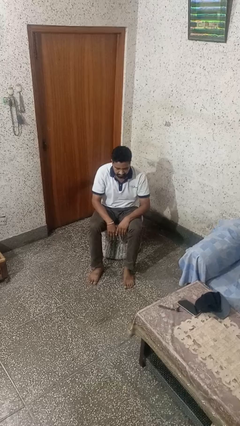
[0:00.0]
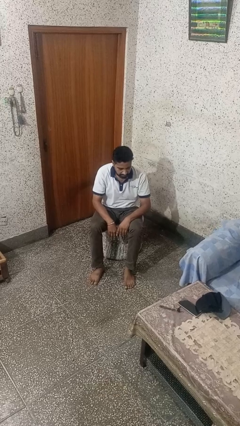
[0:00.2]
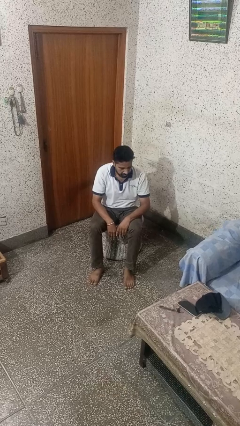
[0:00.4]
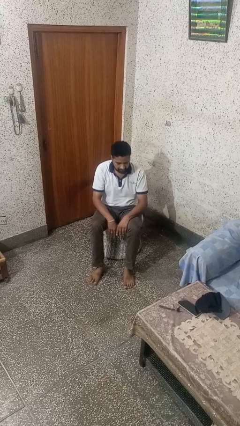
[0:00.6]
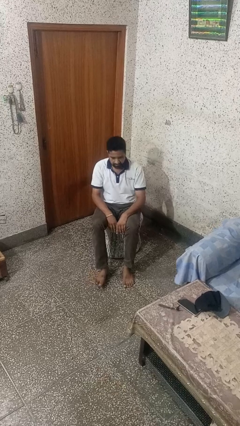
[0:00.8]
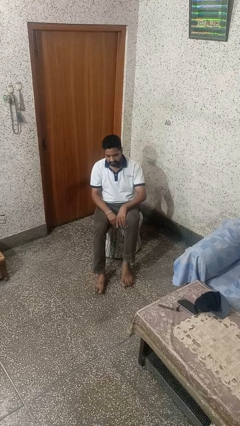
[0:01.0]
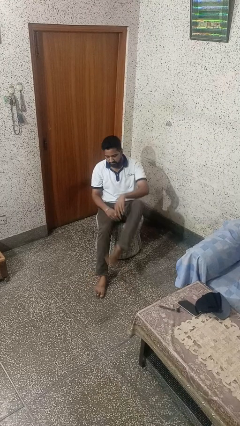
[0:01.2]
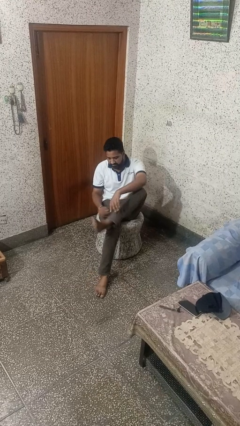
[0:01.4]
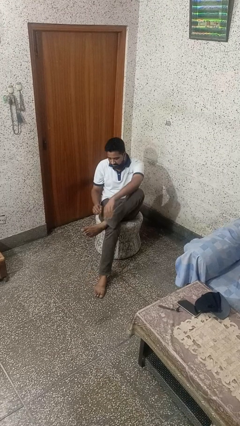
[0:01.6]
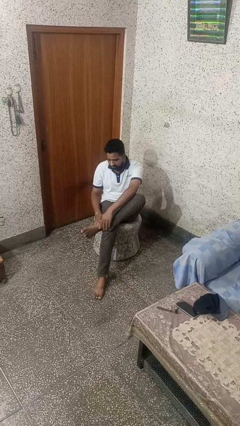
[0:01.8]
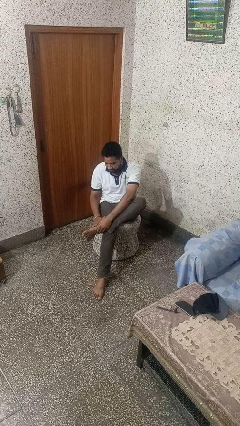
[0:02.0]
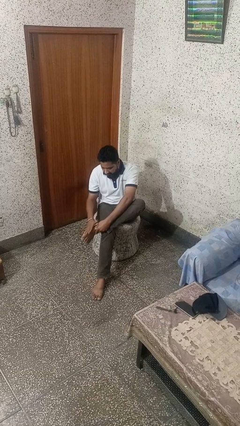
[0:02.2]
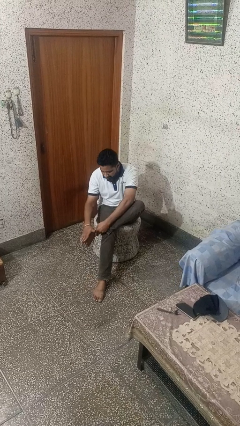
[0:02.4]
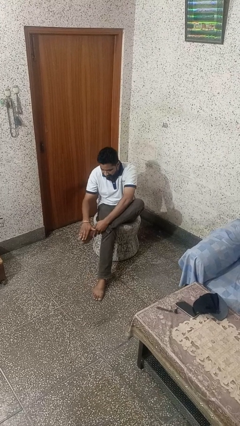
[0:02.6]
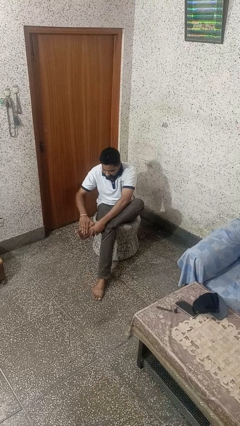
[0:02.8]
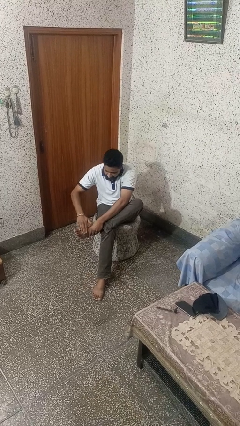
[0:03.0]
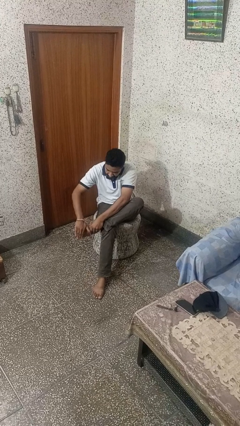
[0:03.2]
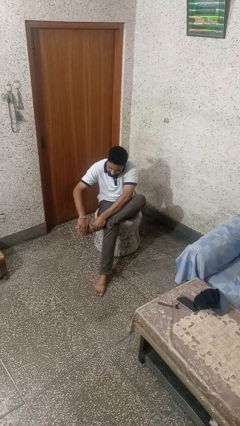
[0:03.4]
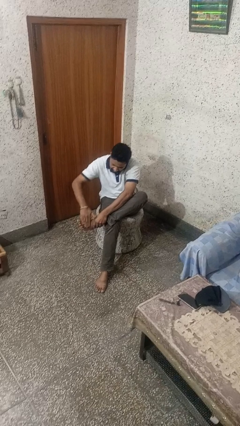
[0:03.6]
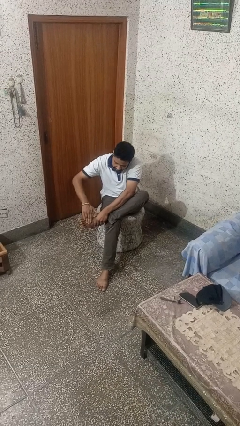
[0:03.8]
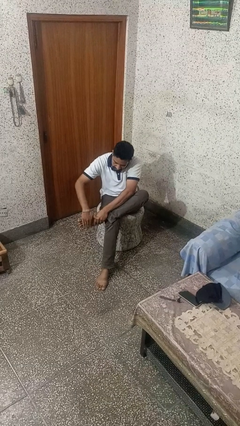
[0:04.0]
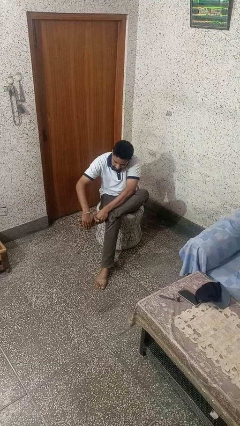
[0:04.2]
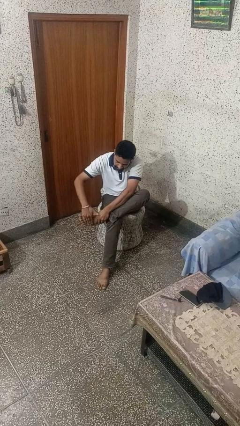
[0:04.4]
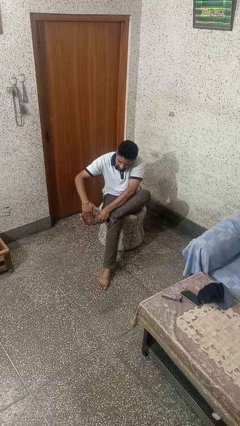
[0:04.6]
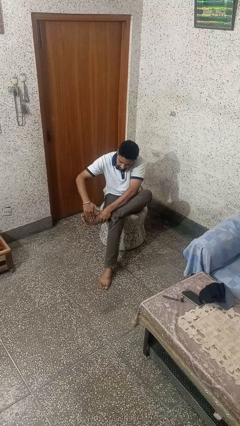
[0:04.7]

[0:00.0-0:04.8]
person rubs foot

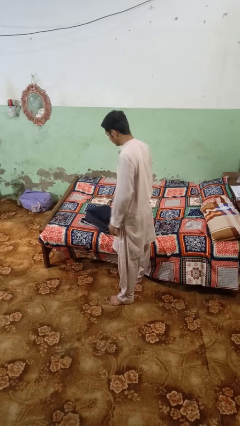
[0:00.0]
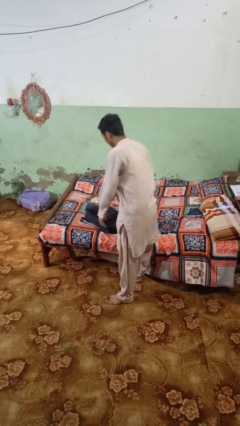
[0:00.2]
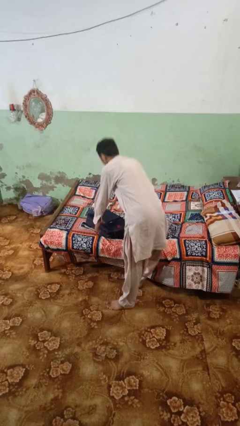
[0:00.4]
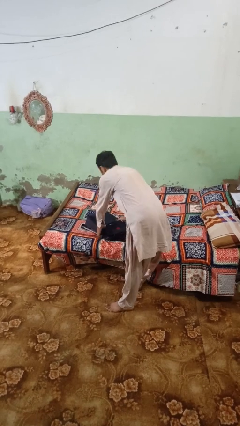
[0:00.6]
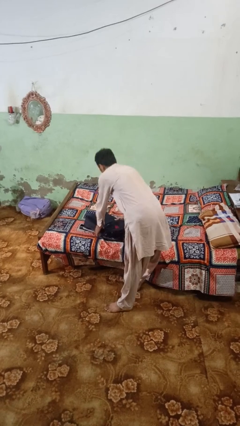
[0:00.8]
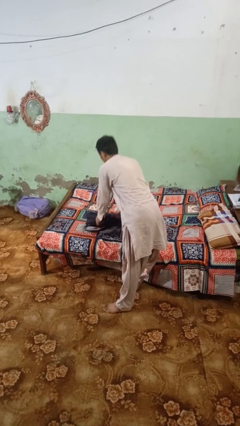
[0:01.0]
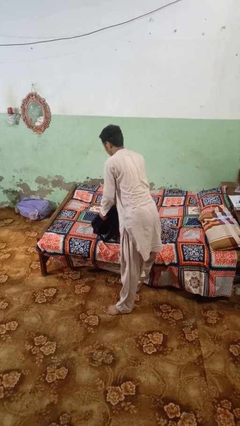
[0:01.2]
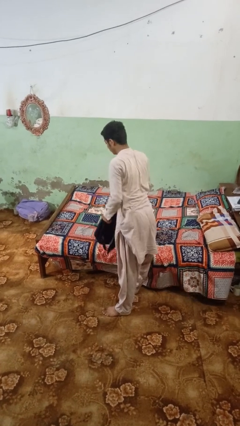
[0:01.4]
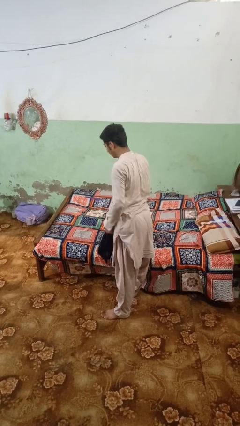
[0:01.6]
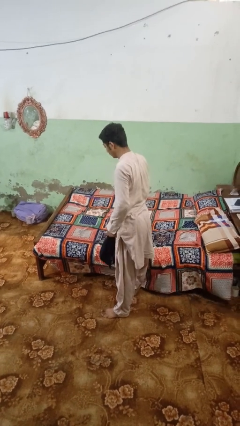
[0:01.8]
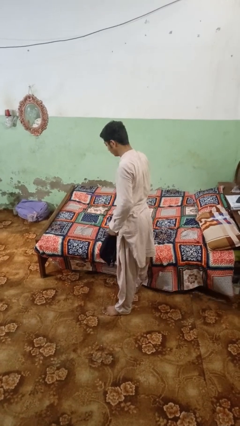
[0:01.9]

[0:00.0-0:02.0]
person picks up object from bed

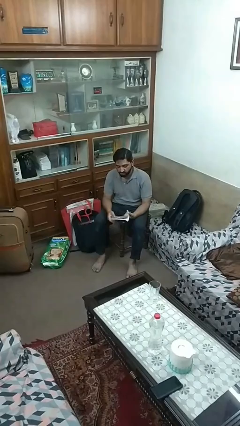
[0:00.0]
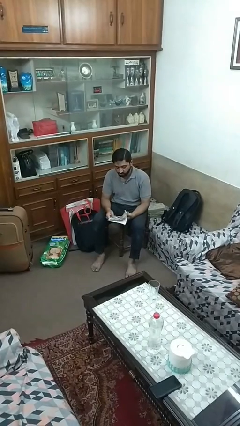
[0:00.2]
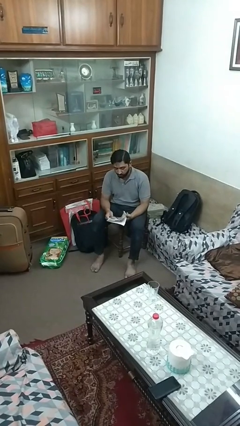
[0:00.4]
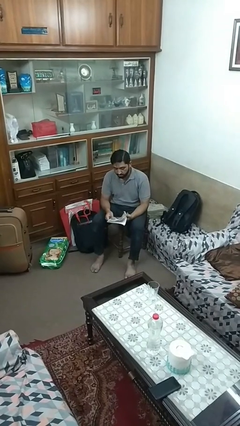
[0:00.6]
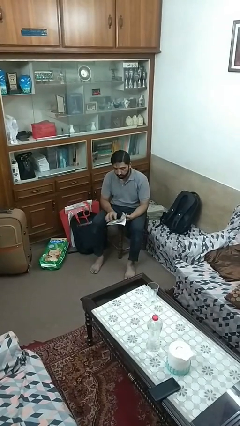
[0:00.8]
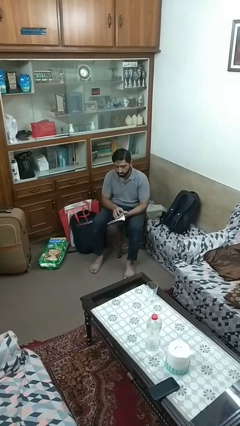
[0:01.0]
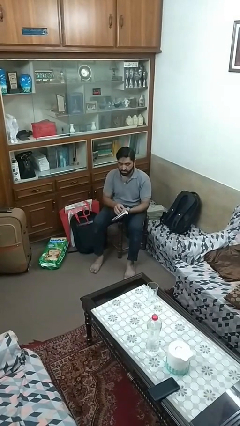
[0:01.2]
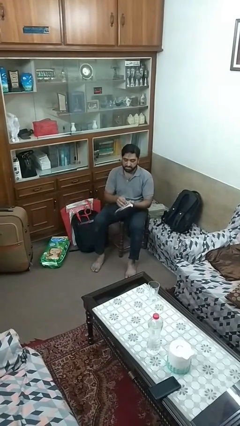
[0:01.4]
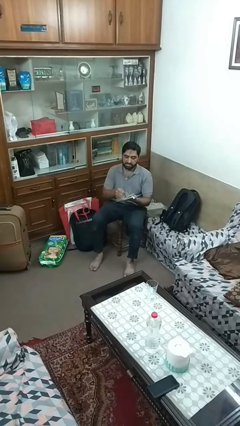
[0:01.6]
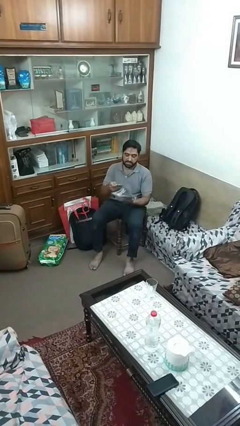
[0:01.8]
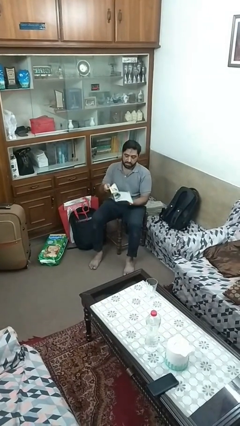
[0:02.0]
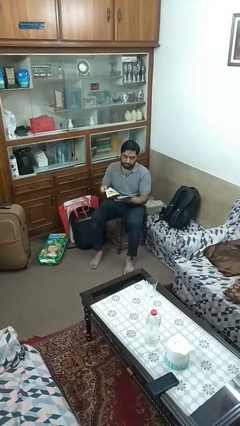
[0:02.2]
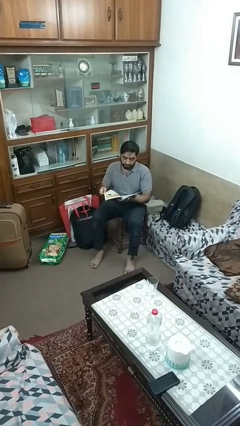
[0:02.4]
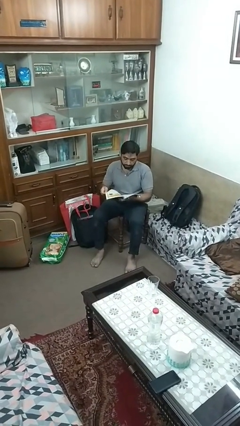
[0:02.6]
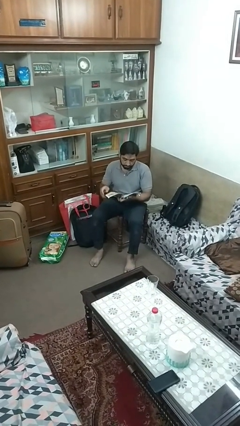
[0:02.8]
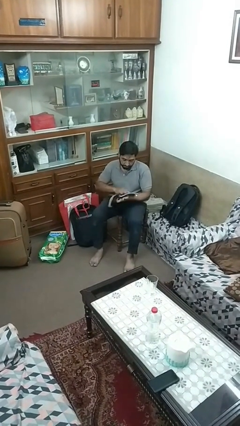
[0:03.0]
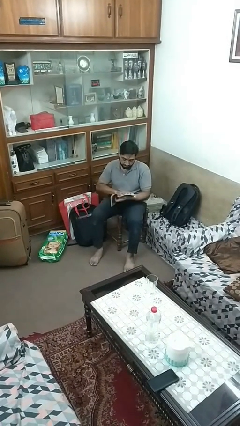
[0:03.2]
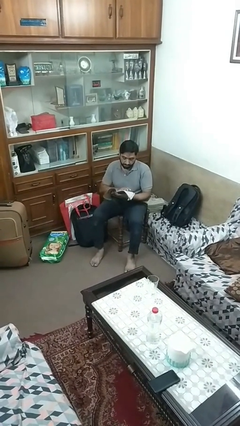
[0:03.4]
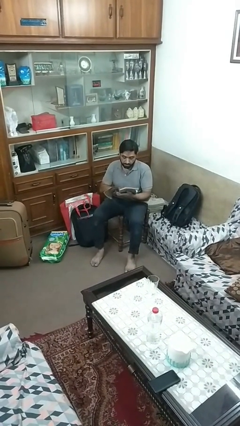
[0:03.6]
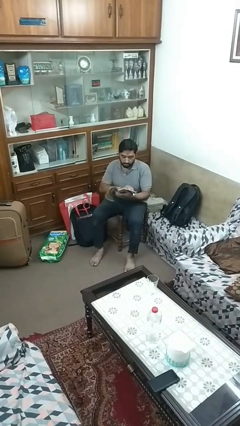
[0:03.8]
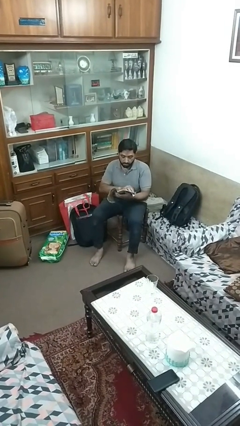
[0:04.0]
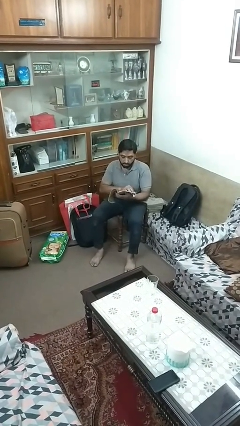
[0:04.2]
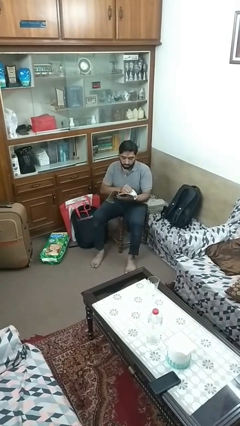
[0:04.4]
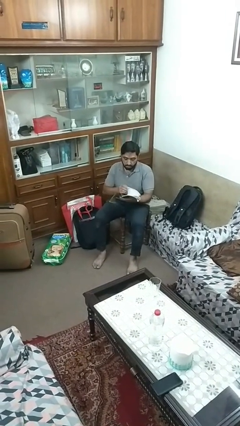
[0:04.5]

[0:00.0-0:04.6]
person reads magazine

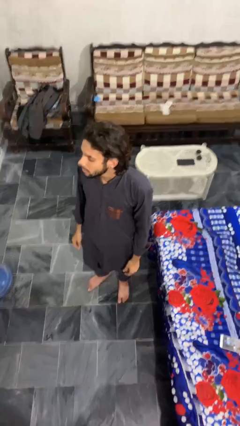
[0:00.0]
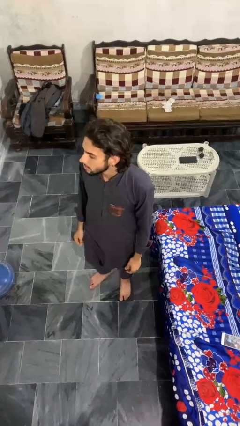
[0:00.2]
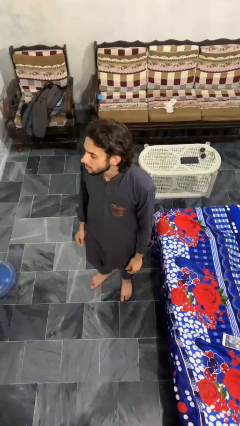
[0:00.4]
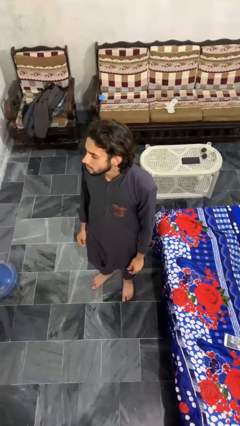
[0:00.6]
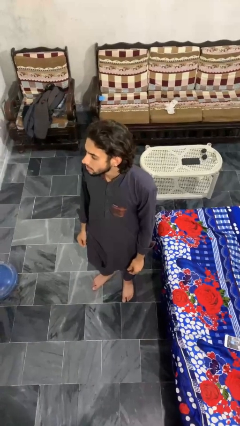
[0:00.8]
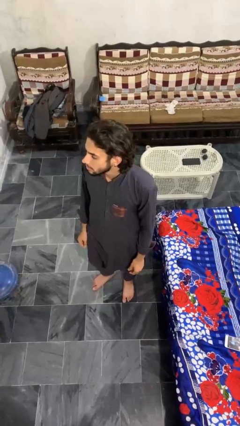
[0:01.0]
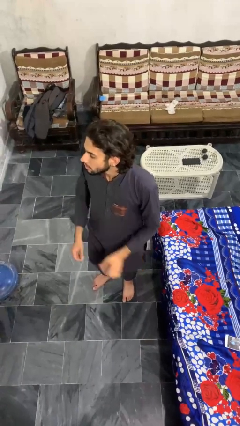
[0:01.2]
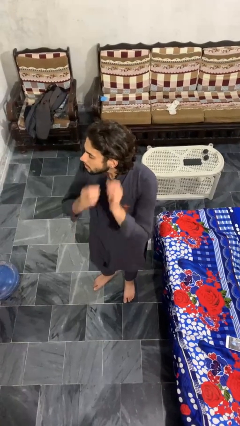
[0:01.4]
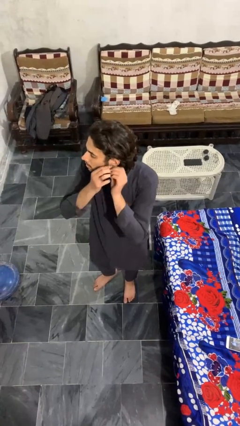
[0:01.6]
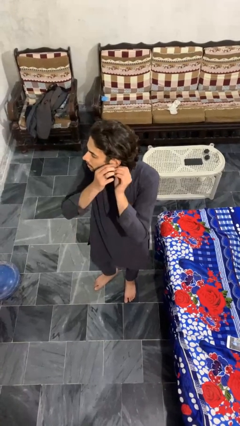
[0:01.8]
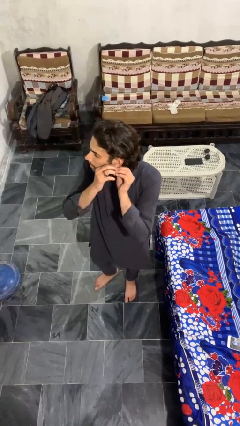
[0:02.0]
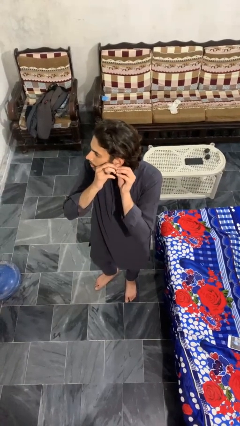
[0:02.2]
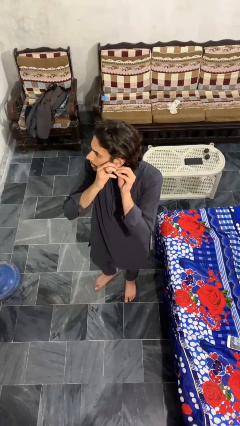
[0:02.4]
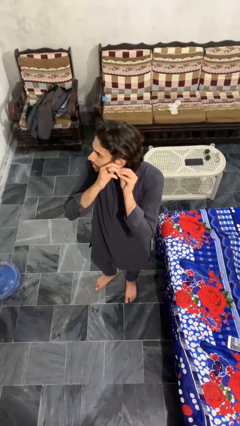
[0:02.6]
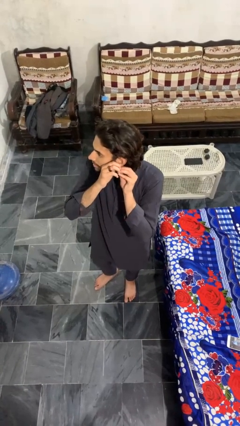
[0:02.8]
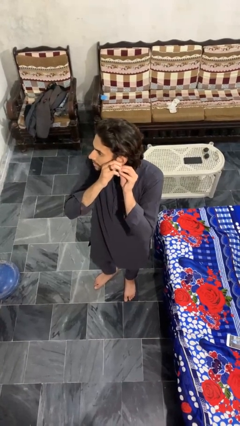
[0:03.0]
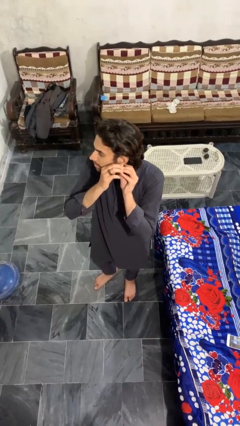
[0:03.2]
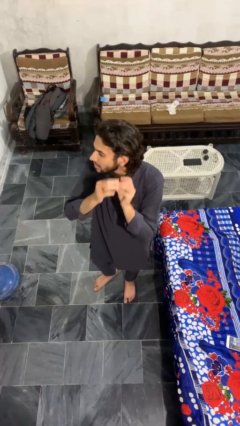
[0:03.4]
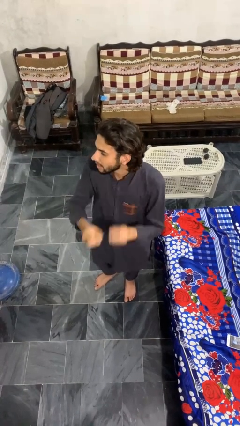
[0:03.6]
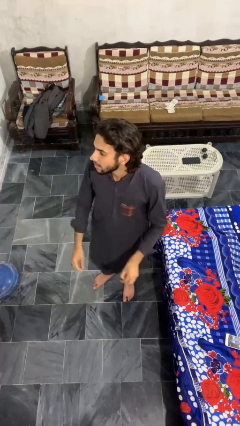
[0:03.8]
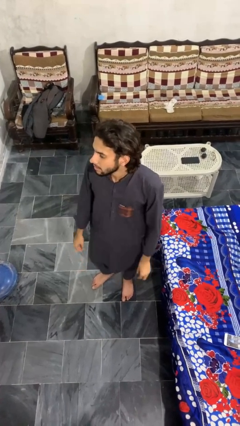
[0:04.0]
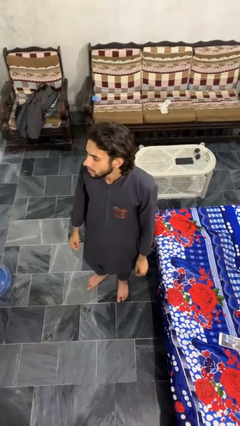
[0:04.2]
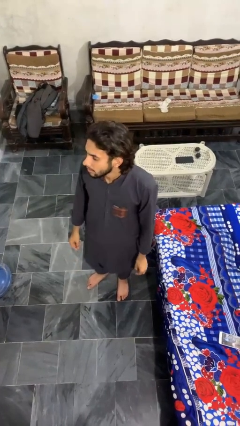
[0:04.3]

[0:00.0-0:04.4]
person takes off earrings

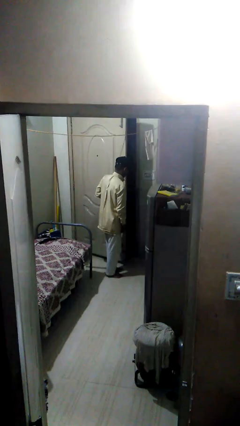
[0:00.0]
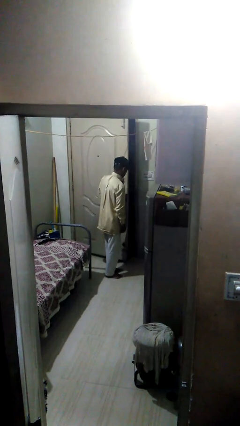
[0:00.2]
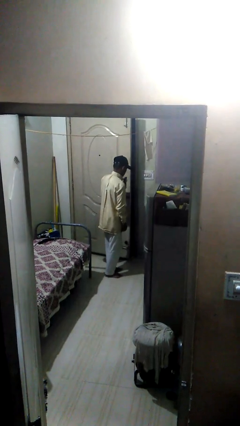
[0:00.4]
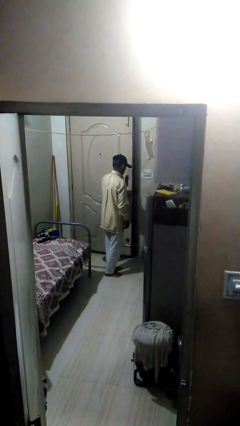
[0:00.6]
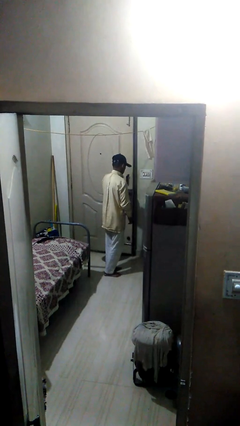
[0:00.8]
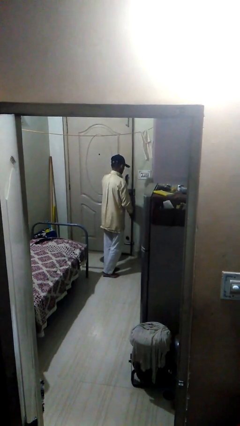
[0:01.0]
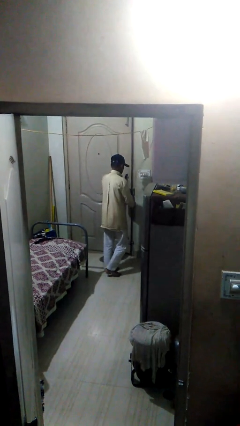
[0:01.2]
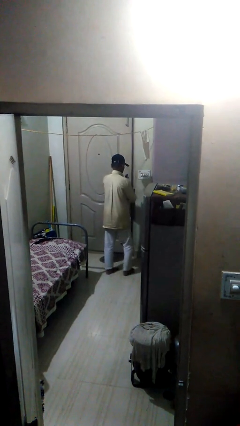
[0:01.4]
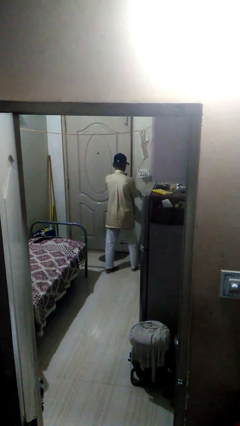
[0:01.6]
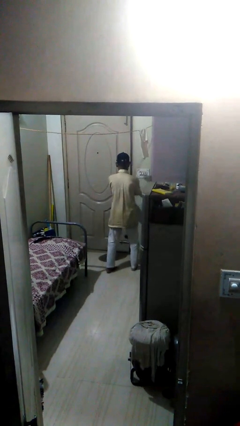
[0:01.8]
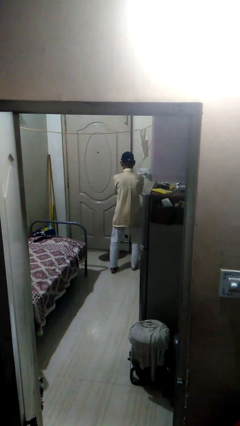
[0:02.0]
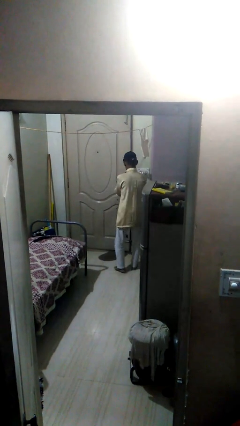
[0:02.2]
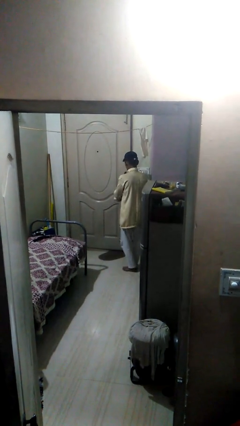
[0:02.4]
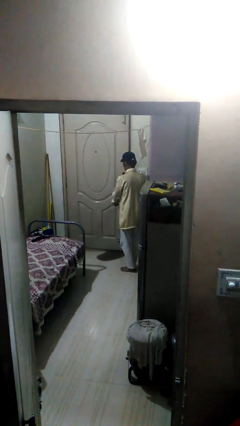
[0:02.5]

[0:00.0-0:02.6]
person closes facility door
